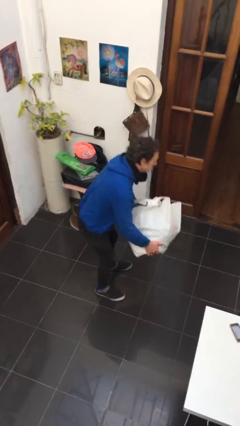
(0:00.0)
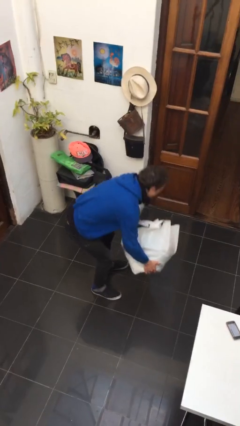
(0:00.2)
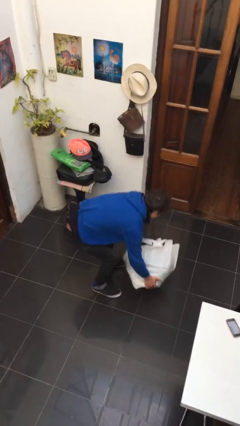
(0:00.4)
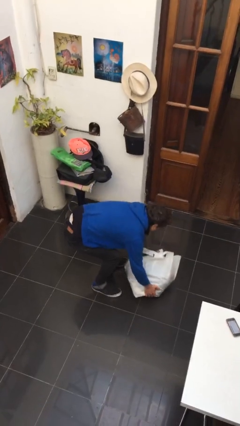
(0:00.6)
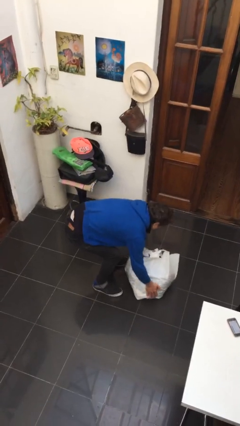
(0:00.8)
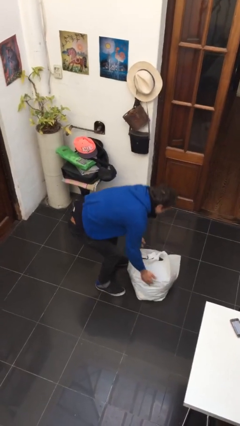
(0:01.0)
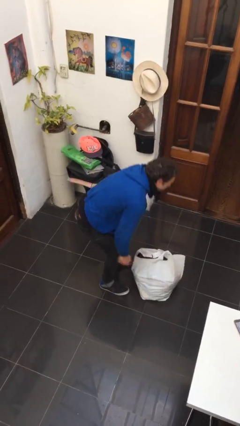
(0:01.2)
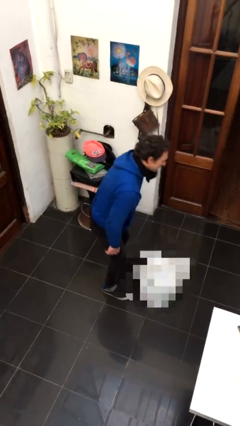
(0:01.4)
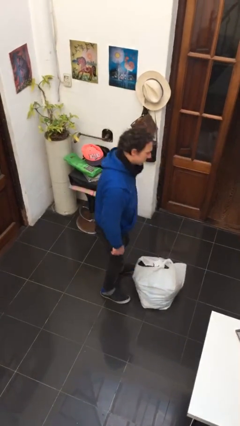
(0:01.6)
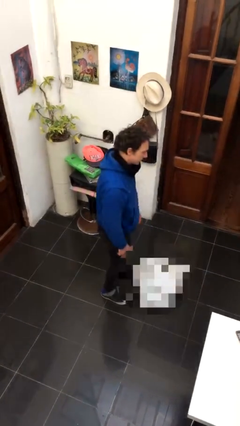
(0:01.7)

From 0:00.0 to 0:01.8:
person puts down object on floor

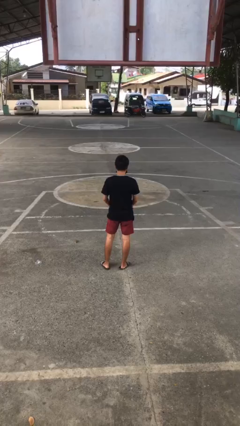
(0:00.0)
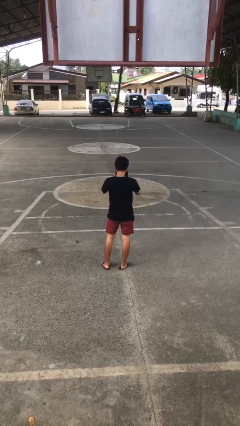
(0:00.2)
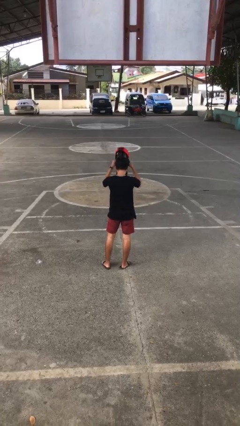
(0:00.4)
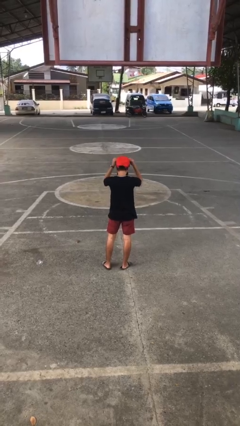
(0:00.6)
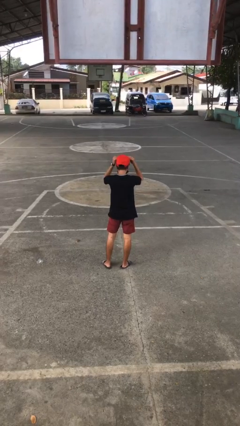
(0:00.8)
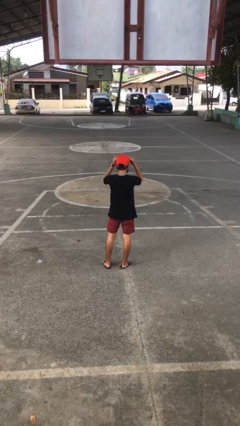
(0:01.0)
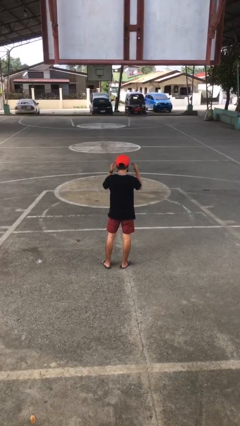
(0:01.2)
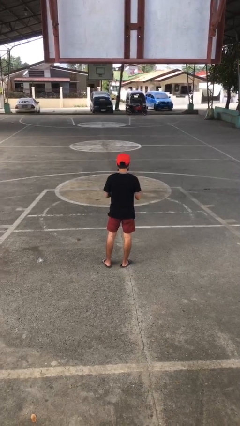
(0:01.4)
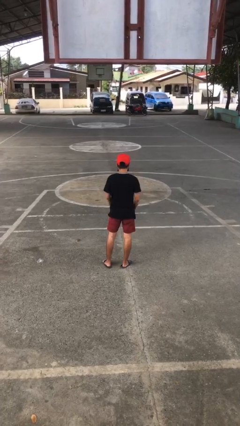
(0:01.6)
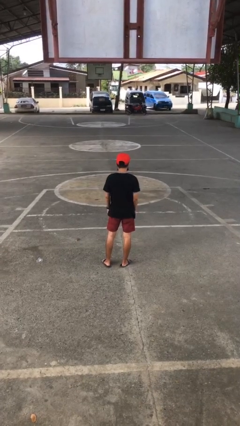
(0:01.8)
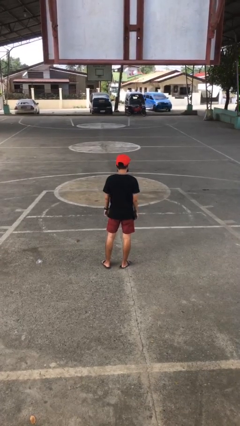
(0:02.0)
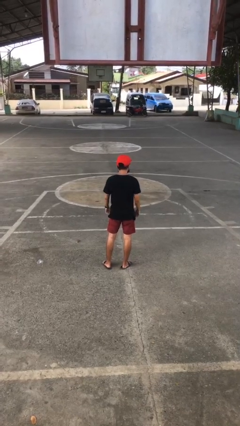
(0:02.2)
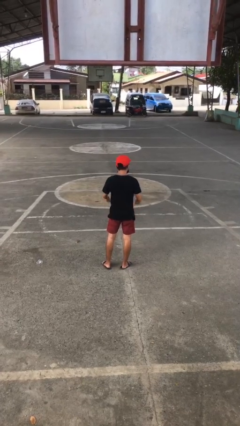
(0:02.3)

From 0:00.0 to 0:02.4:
person puts on hat

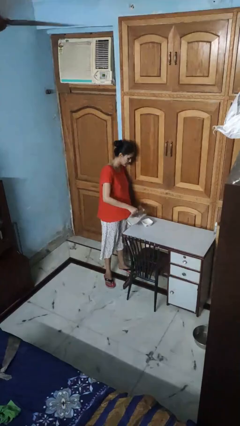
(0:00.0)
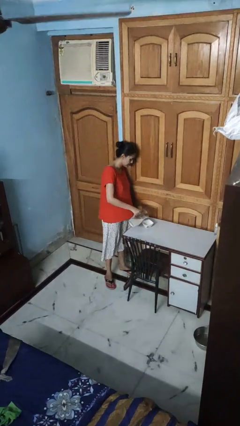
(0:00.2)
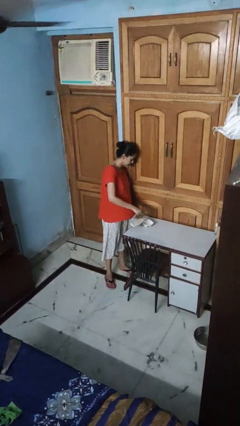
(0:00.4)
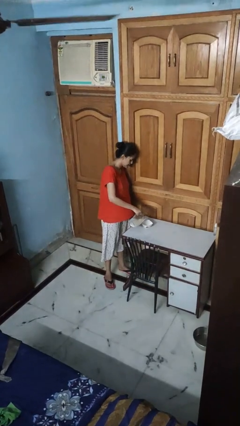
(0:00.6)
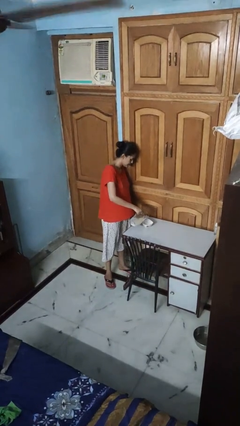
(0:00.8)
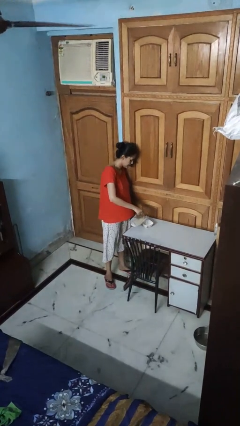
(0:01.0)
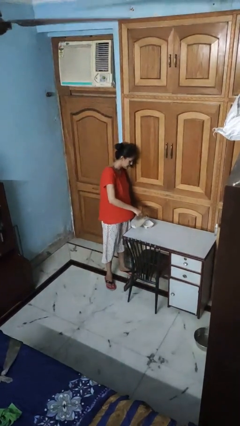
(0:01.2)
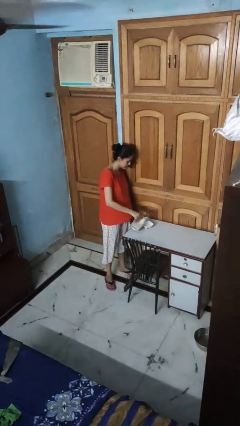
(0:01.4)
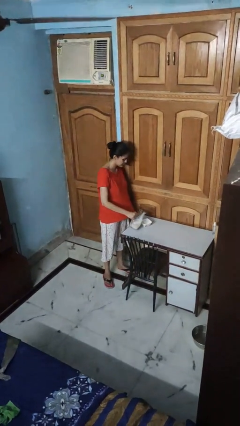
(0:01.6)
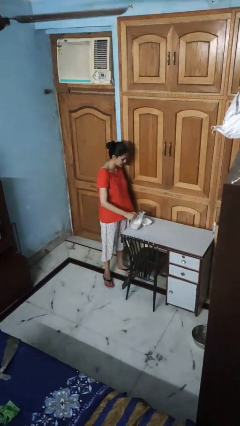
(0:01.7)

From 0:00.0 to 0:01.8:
person pours into bowl

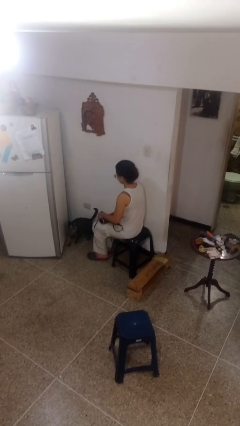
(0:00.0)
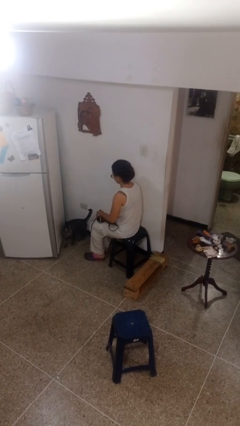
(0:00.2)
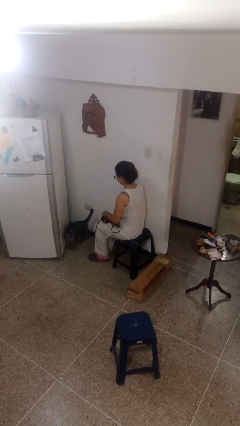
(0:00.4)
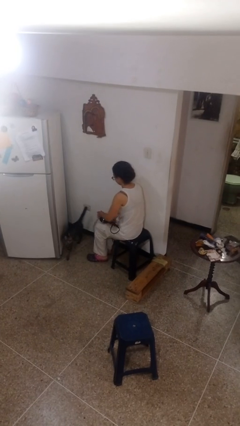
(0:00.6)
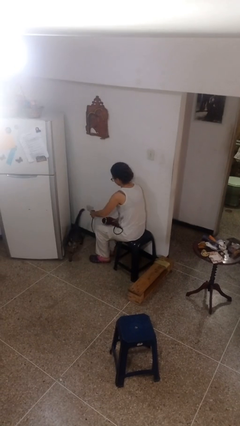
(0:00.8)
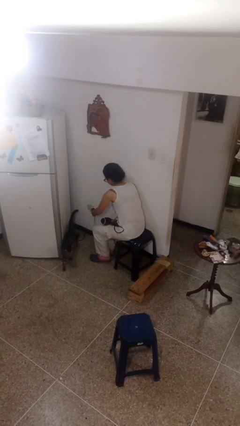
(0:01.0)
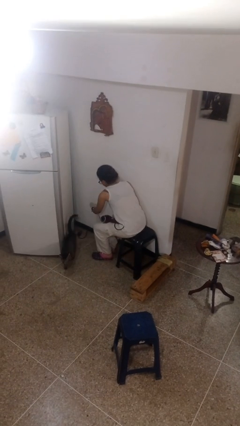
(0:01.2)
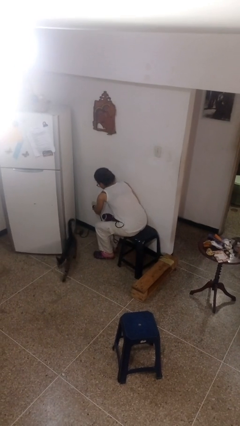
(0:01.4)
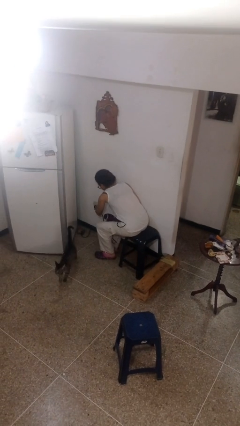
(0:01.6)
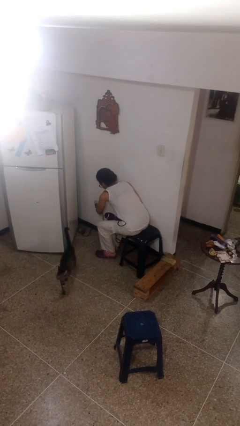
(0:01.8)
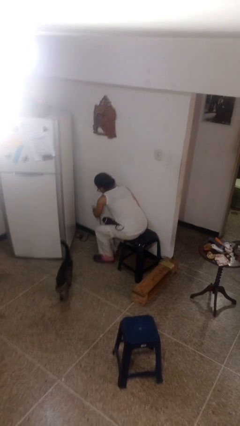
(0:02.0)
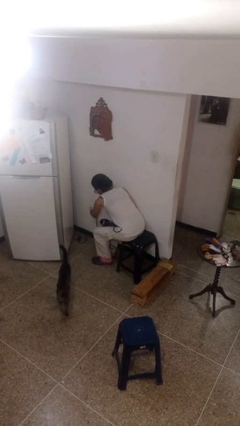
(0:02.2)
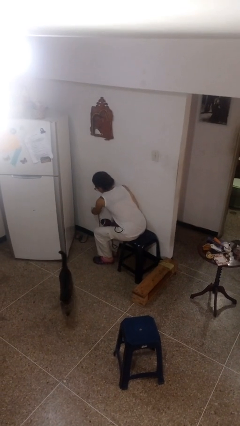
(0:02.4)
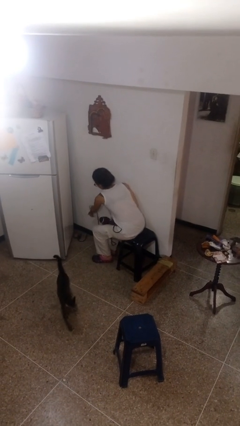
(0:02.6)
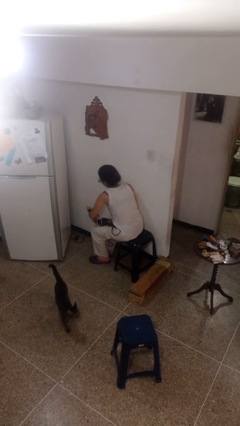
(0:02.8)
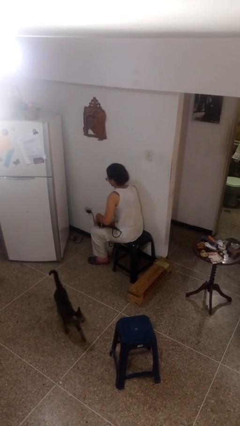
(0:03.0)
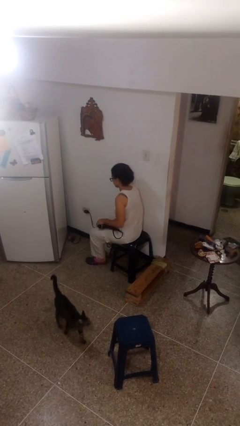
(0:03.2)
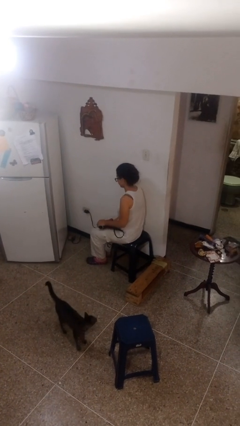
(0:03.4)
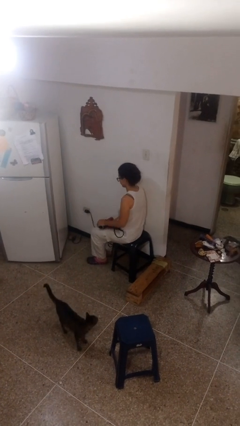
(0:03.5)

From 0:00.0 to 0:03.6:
person plugs into electrical socket

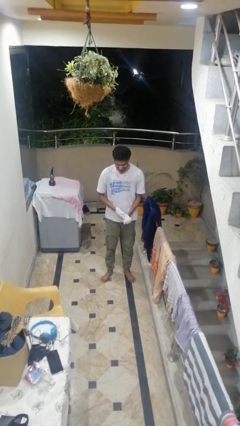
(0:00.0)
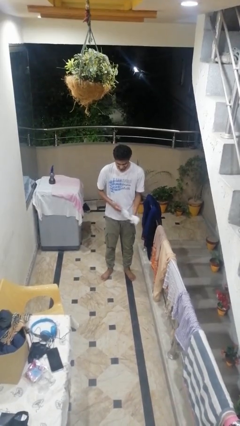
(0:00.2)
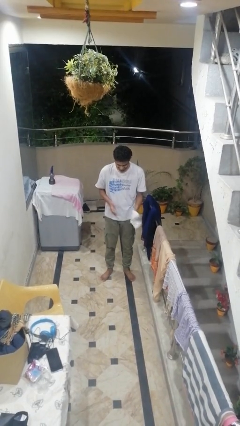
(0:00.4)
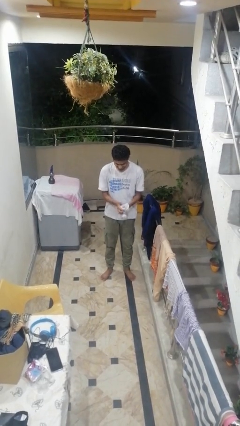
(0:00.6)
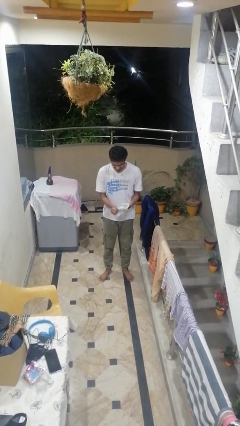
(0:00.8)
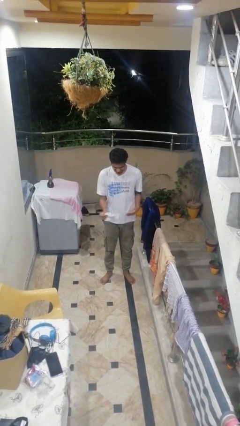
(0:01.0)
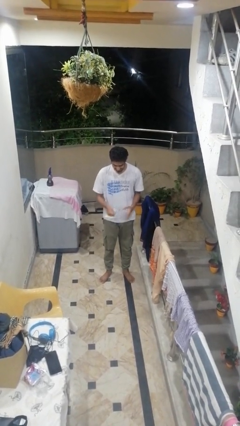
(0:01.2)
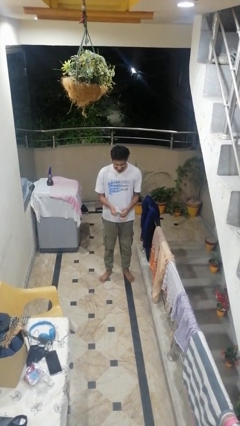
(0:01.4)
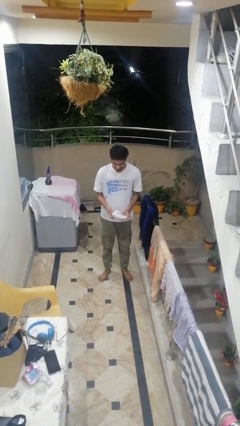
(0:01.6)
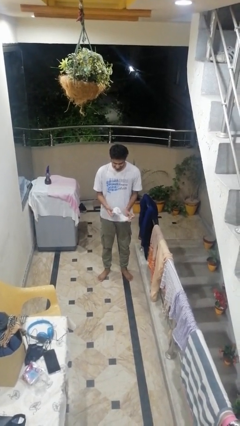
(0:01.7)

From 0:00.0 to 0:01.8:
person takes off gloves

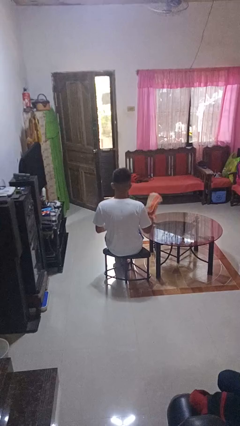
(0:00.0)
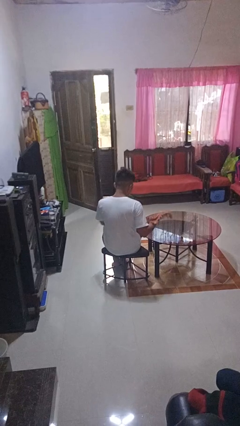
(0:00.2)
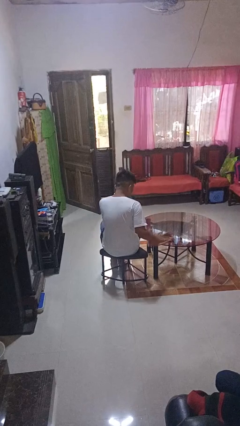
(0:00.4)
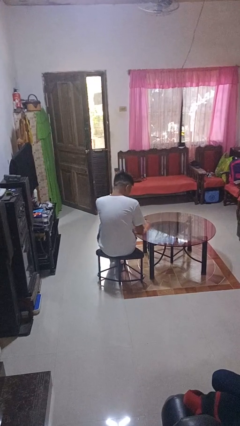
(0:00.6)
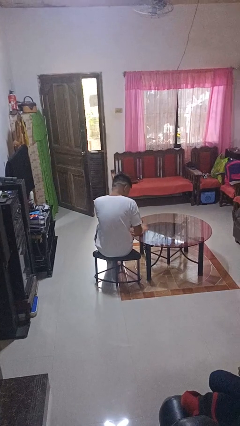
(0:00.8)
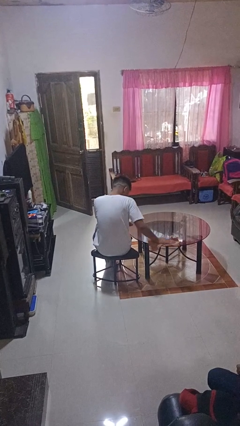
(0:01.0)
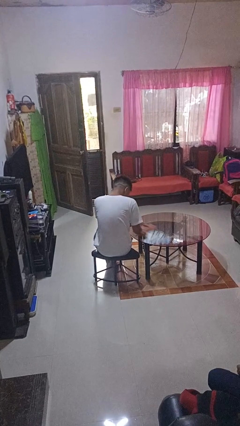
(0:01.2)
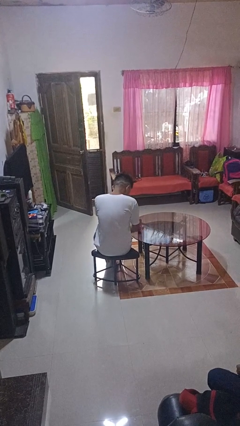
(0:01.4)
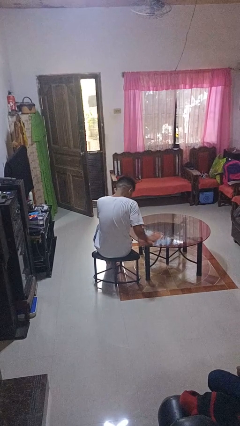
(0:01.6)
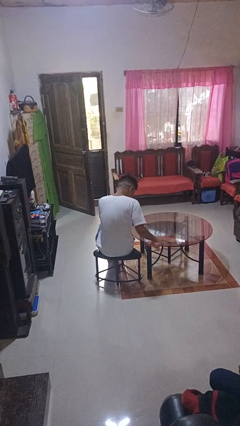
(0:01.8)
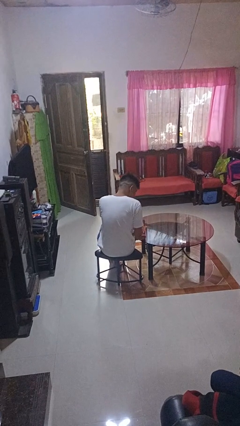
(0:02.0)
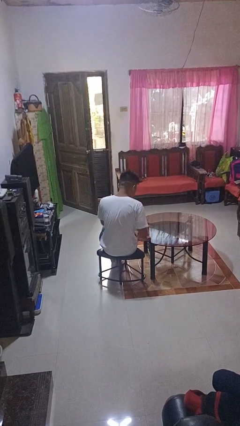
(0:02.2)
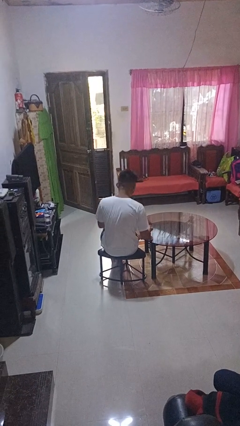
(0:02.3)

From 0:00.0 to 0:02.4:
person cleans table with rag

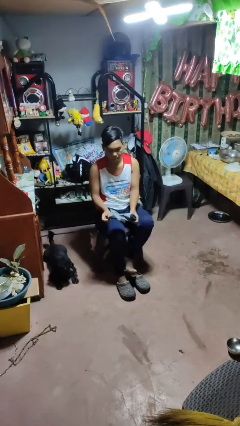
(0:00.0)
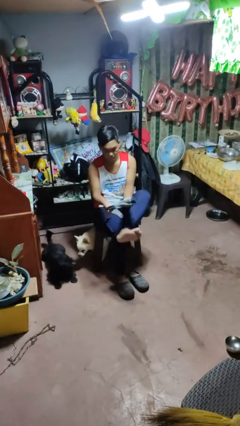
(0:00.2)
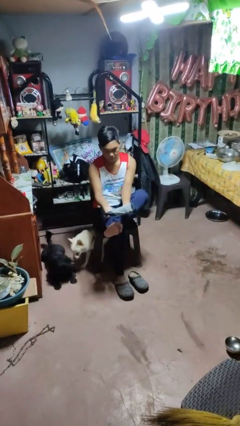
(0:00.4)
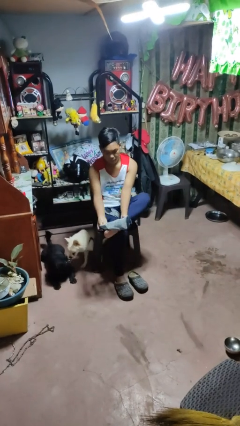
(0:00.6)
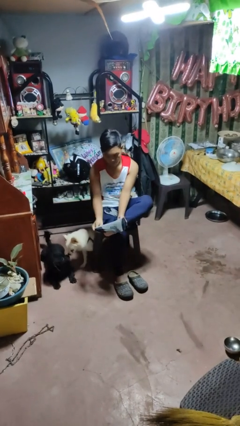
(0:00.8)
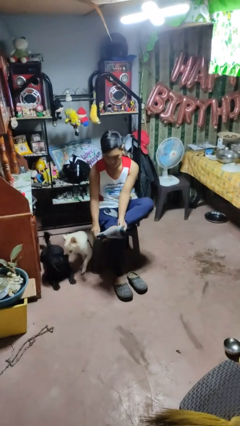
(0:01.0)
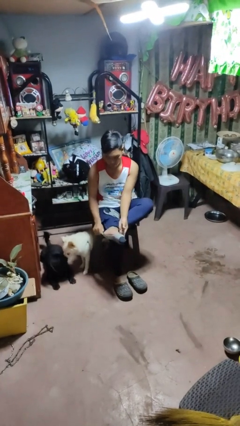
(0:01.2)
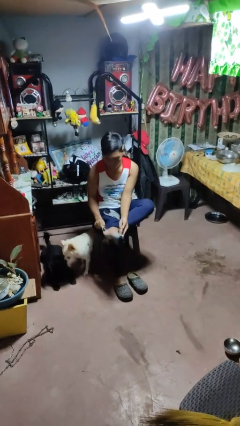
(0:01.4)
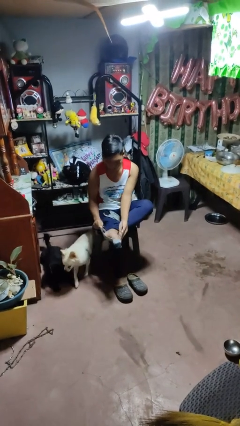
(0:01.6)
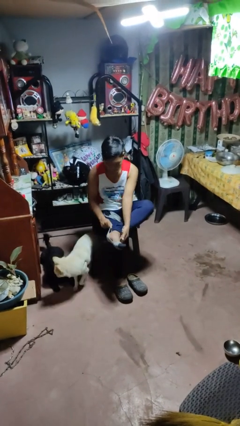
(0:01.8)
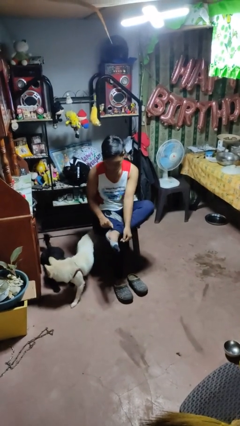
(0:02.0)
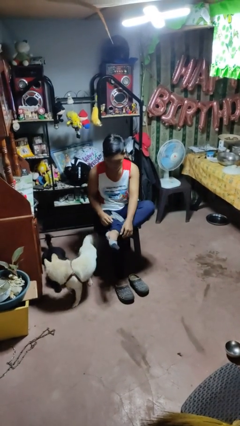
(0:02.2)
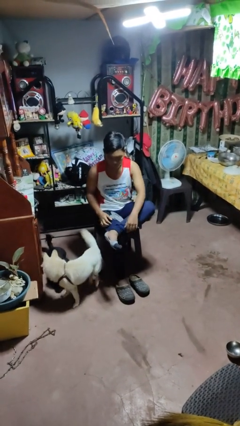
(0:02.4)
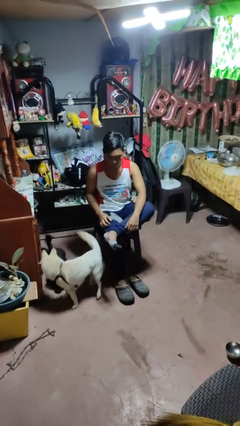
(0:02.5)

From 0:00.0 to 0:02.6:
person puts on socks
